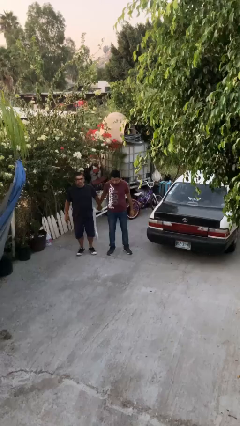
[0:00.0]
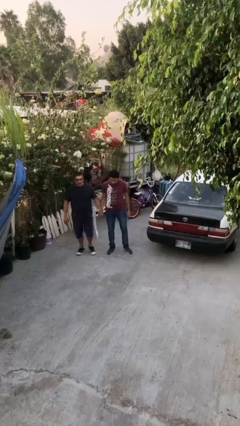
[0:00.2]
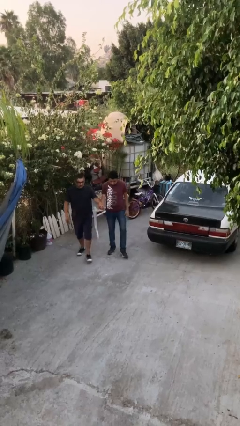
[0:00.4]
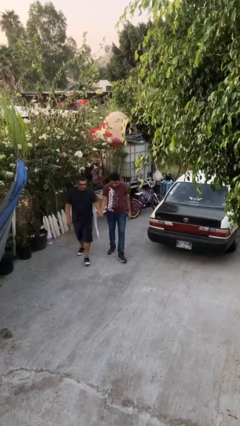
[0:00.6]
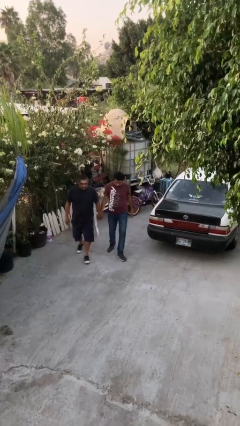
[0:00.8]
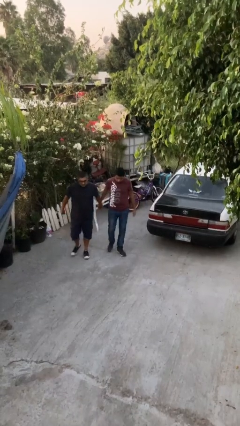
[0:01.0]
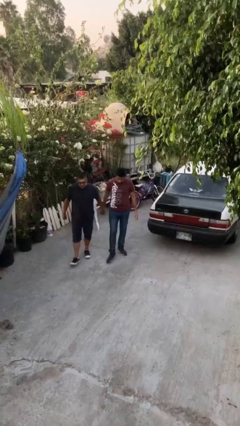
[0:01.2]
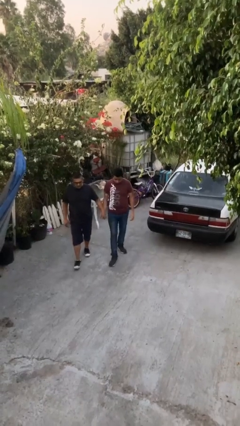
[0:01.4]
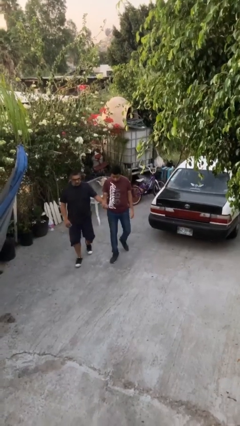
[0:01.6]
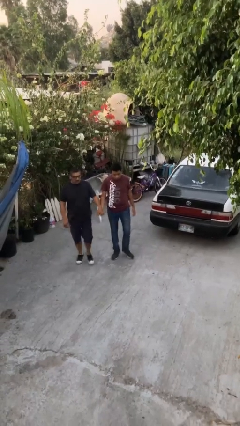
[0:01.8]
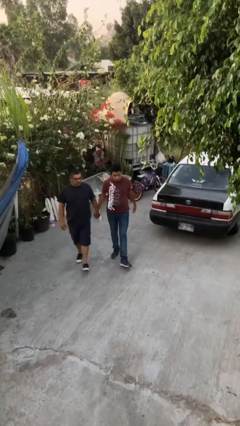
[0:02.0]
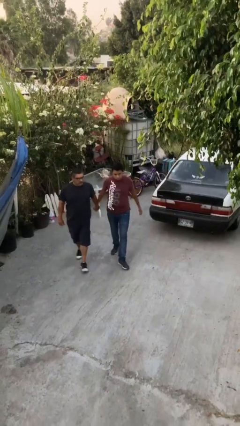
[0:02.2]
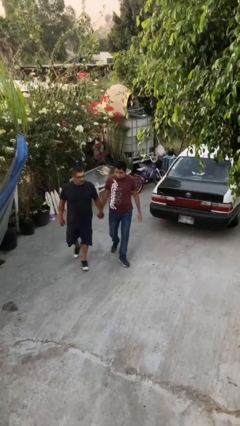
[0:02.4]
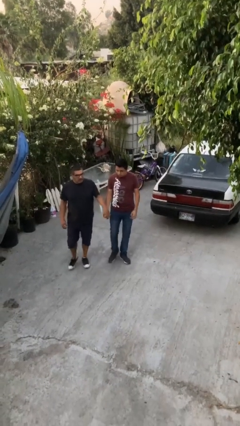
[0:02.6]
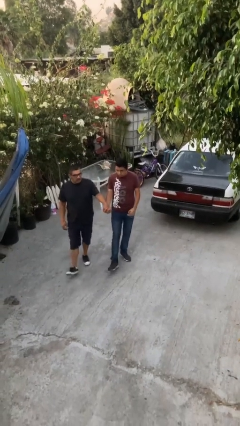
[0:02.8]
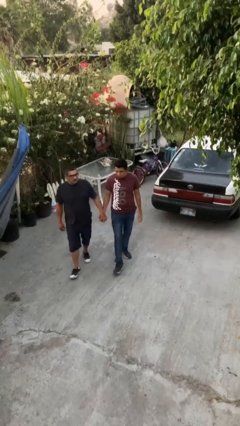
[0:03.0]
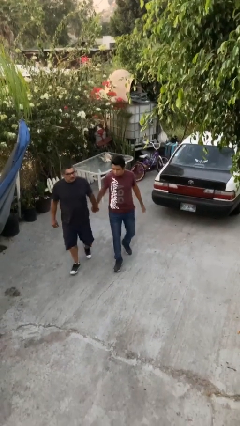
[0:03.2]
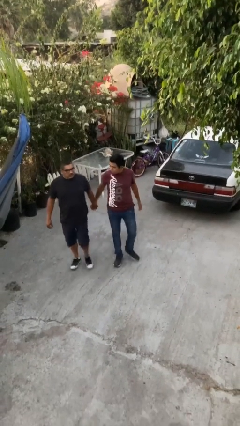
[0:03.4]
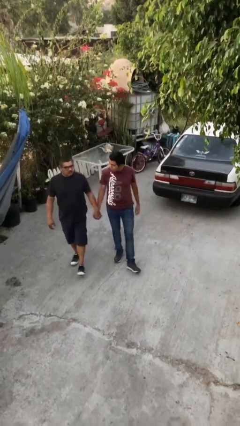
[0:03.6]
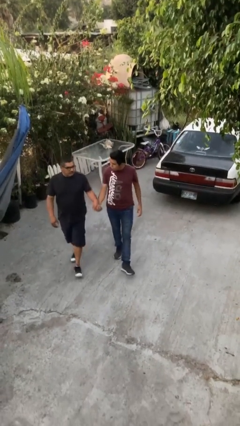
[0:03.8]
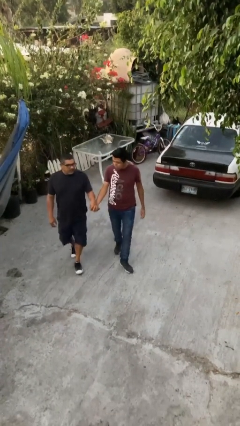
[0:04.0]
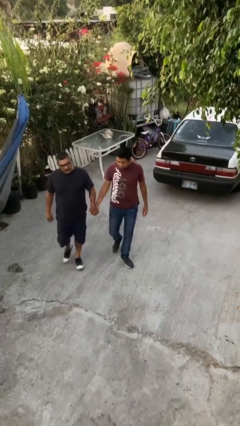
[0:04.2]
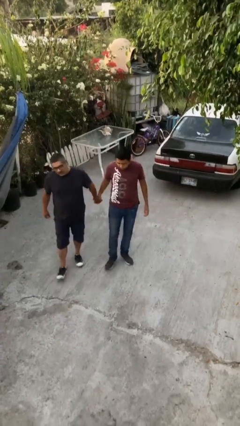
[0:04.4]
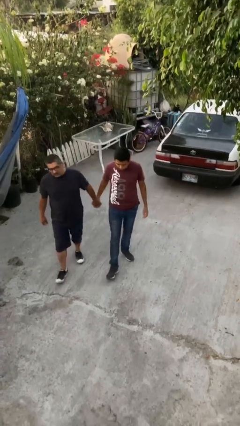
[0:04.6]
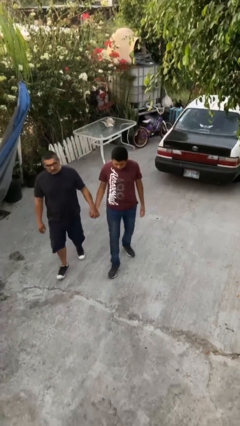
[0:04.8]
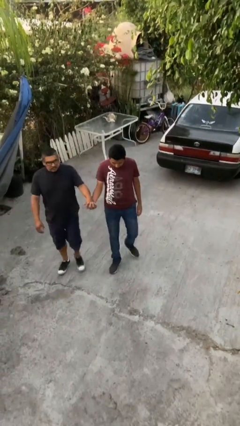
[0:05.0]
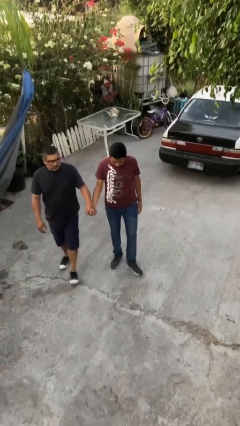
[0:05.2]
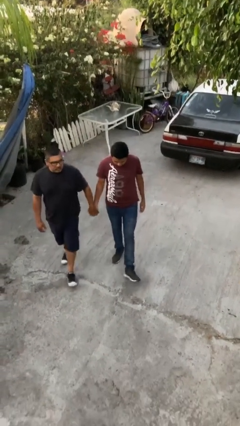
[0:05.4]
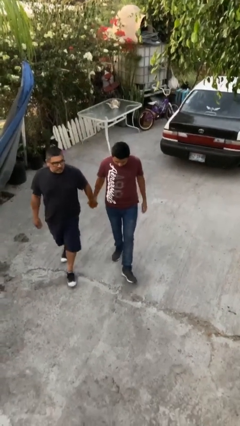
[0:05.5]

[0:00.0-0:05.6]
person holds hand

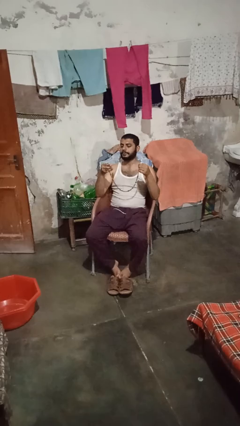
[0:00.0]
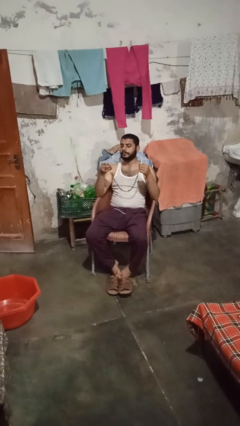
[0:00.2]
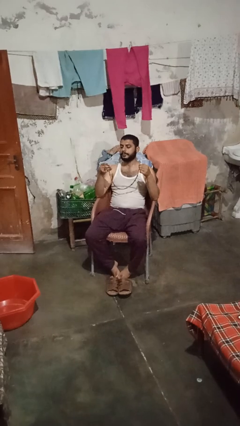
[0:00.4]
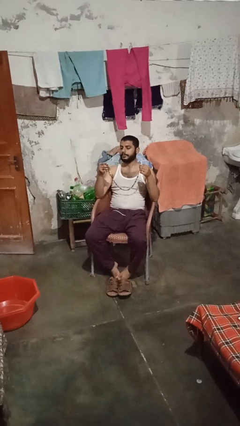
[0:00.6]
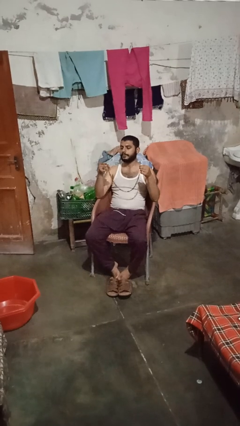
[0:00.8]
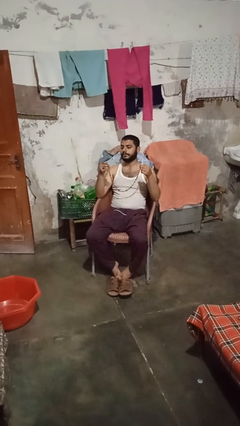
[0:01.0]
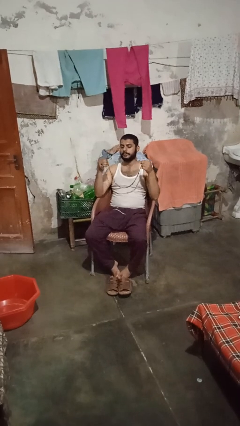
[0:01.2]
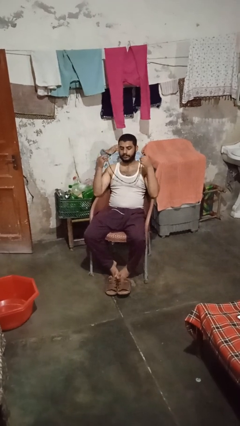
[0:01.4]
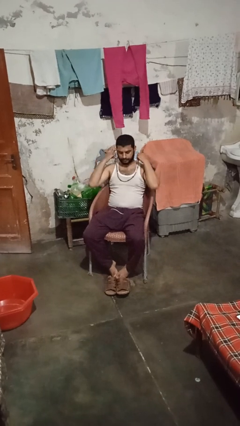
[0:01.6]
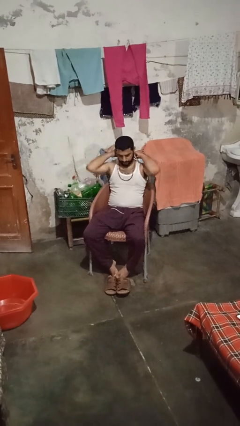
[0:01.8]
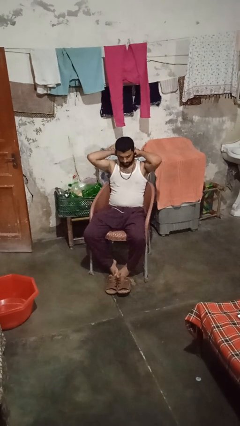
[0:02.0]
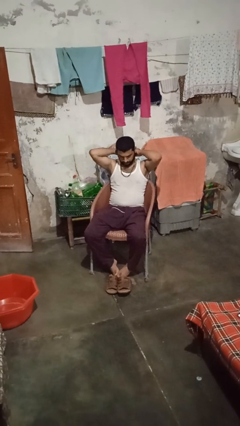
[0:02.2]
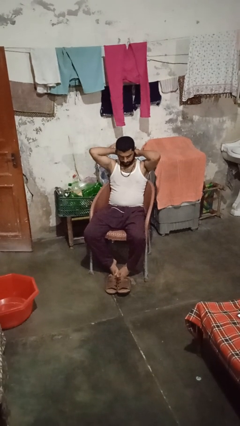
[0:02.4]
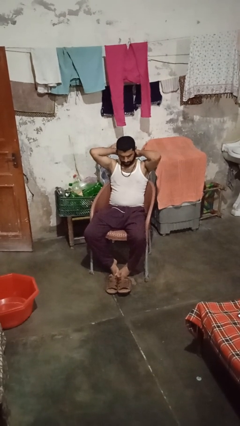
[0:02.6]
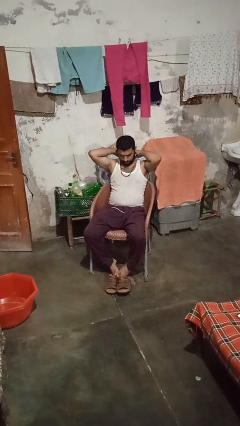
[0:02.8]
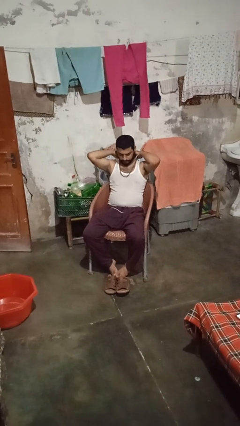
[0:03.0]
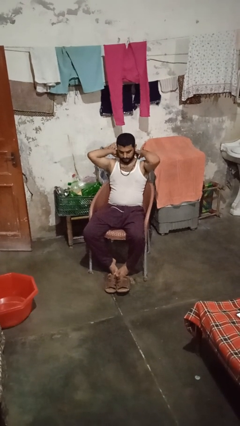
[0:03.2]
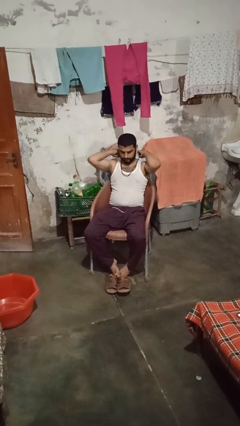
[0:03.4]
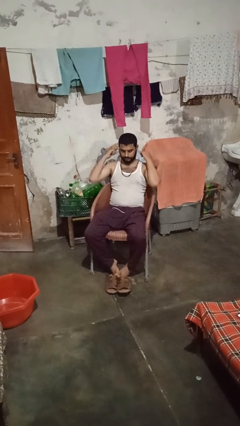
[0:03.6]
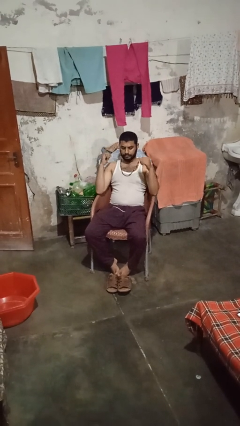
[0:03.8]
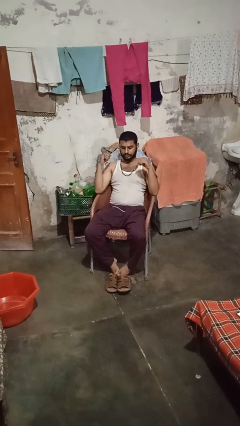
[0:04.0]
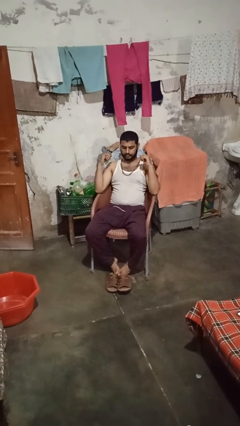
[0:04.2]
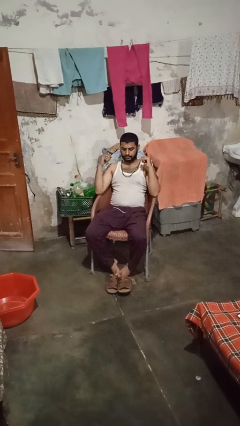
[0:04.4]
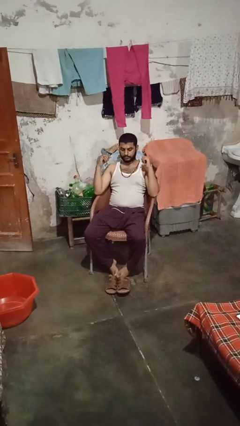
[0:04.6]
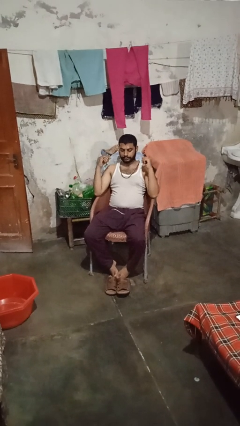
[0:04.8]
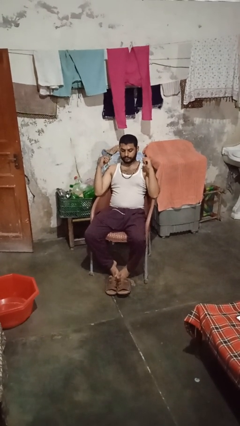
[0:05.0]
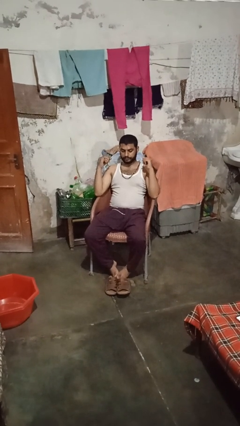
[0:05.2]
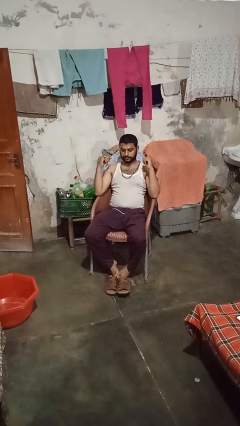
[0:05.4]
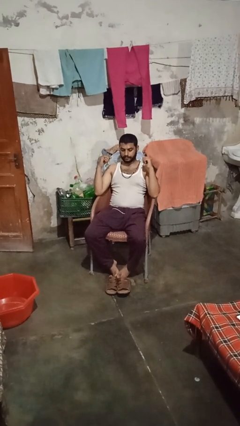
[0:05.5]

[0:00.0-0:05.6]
person puts on necklace

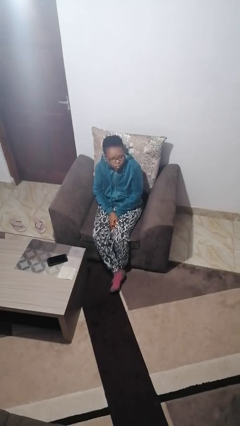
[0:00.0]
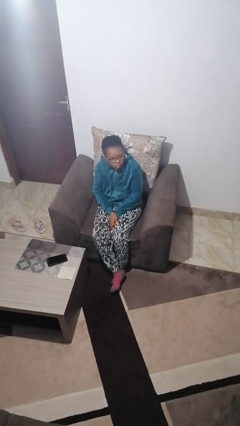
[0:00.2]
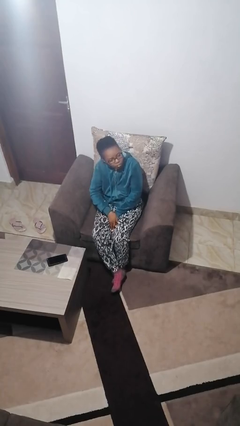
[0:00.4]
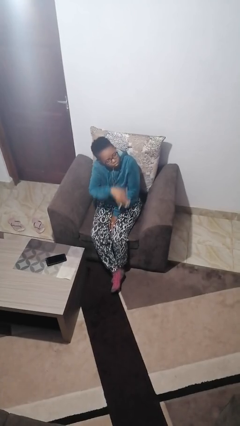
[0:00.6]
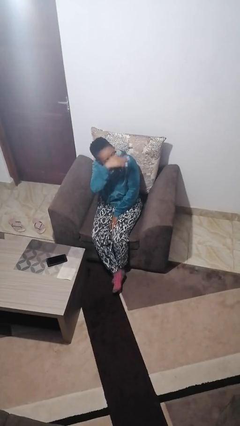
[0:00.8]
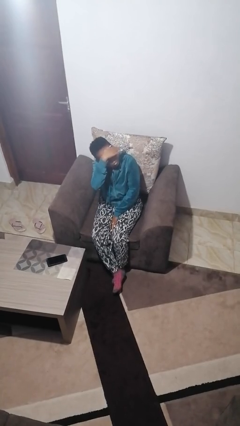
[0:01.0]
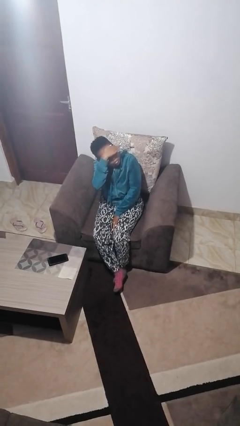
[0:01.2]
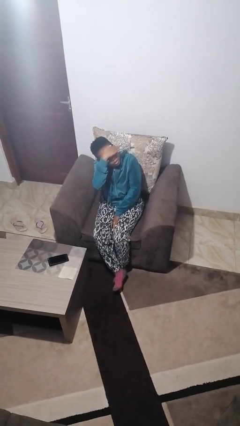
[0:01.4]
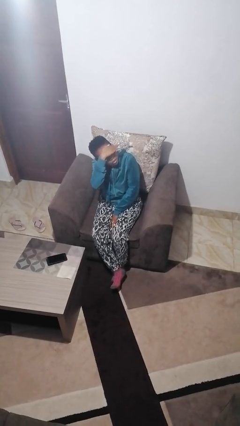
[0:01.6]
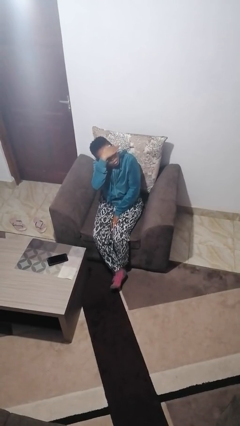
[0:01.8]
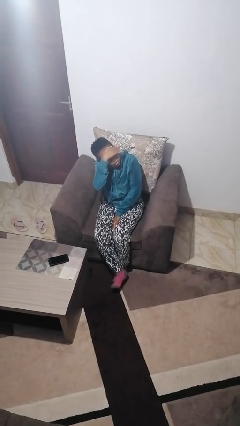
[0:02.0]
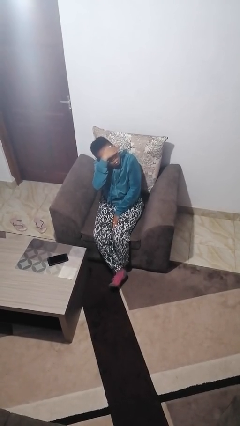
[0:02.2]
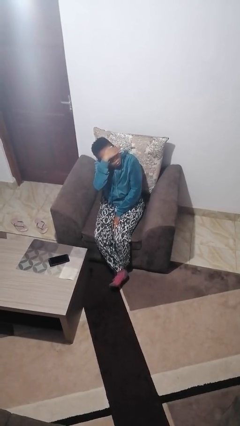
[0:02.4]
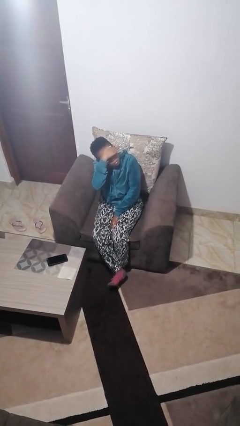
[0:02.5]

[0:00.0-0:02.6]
person shades eyes

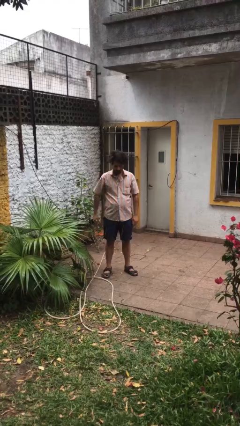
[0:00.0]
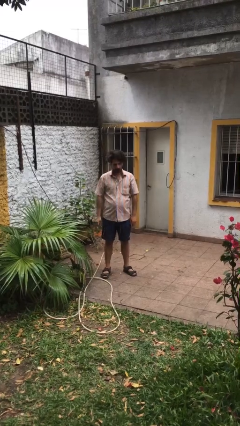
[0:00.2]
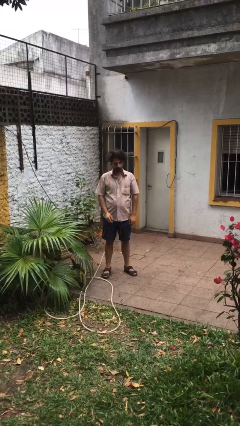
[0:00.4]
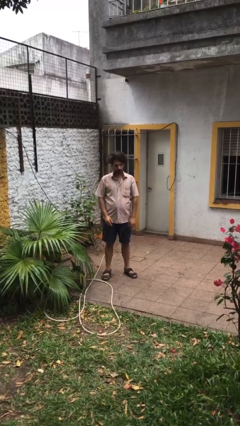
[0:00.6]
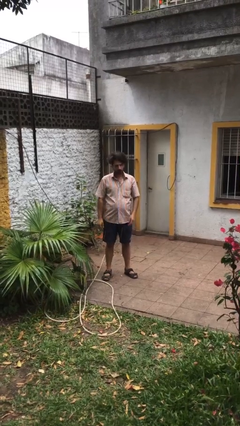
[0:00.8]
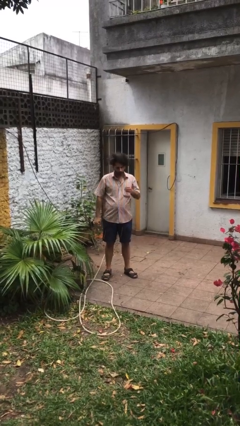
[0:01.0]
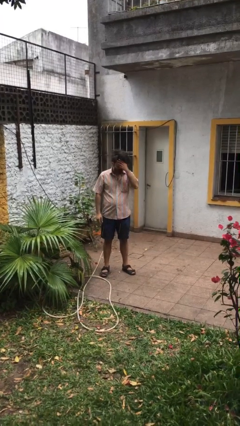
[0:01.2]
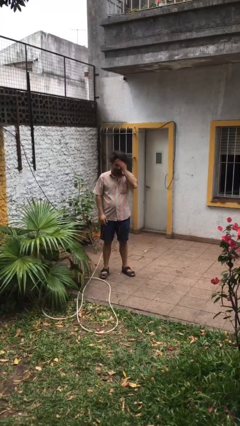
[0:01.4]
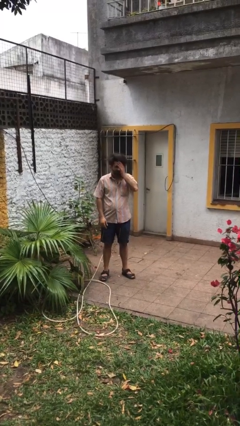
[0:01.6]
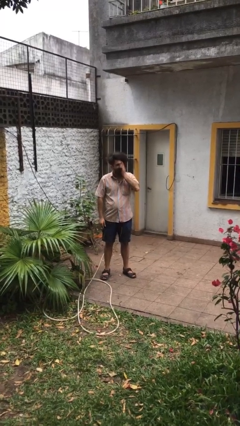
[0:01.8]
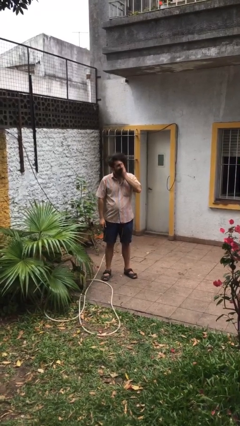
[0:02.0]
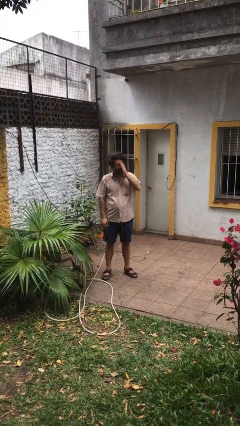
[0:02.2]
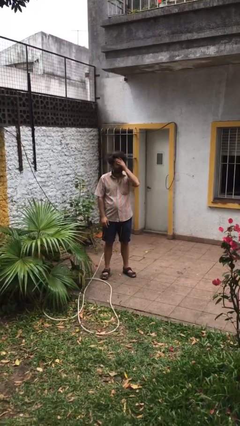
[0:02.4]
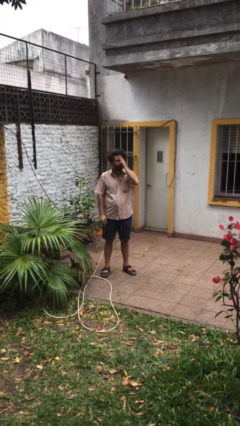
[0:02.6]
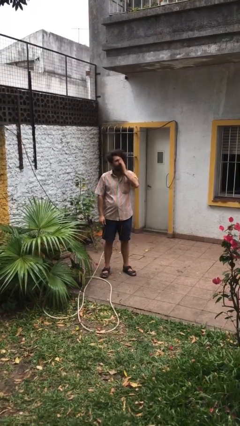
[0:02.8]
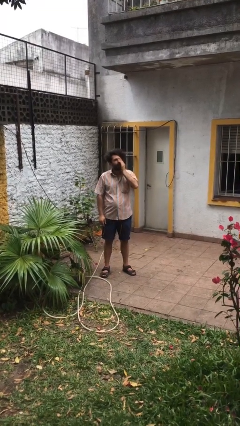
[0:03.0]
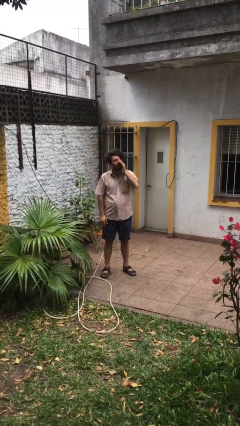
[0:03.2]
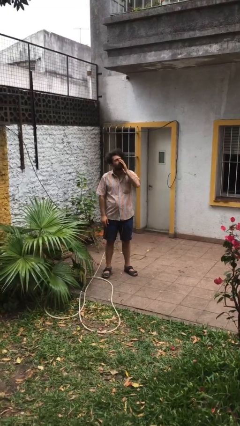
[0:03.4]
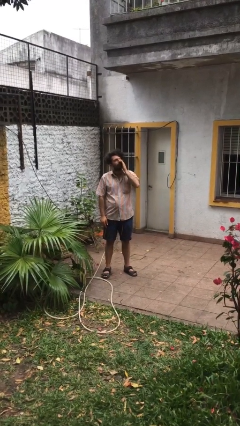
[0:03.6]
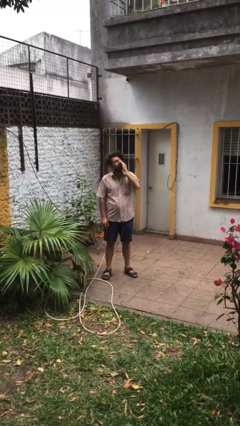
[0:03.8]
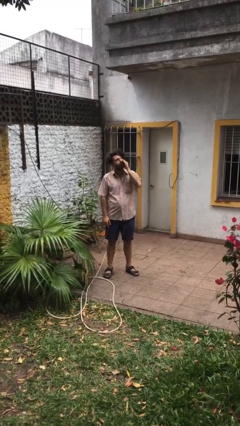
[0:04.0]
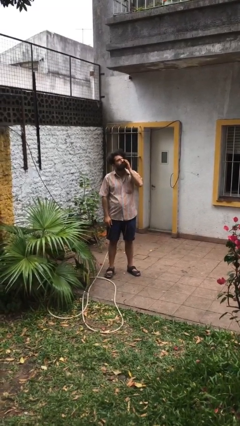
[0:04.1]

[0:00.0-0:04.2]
person rubs eyes
